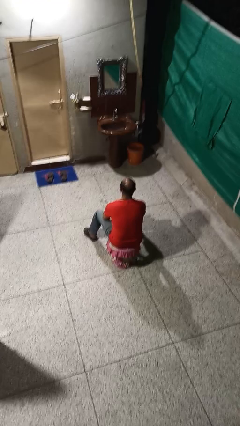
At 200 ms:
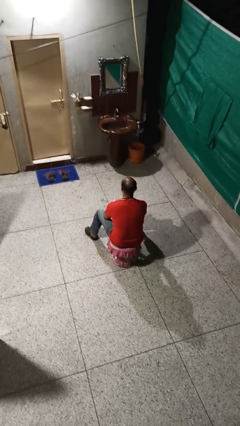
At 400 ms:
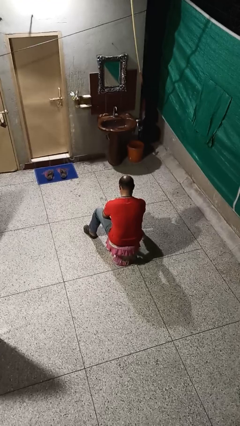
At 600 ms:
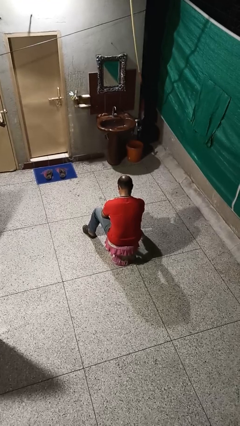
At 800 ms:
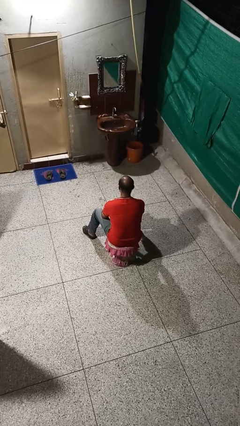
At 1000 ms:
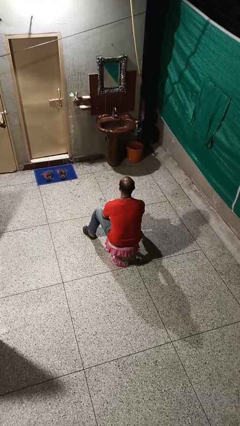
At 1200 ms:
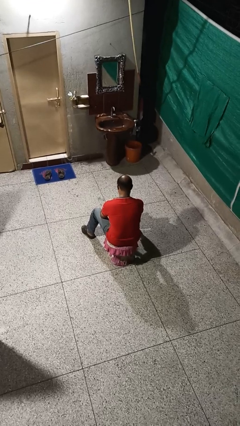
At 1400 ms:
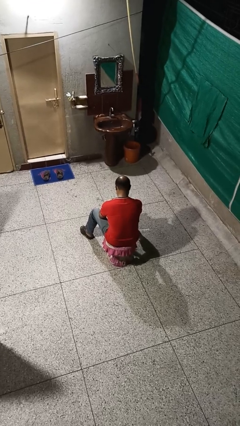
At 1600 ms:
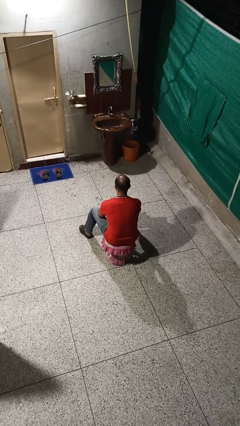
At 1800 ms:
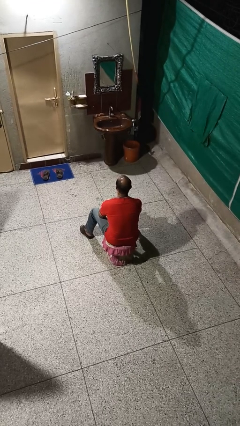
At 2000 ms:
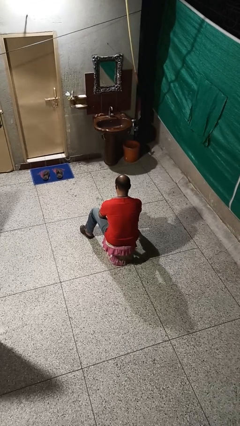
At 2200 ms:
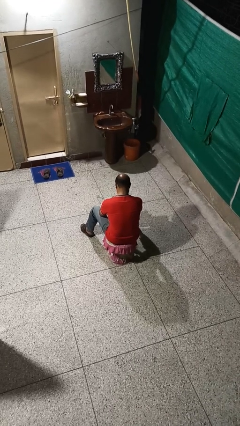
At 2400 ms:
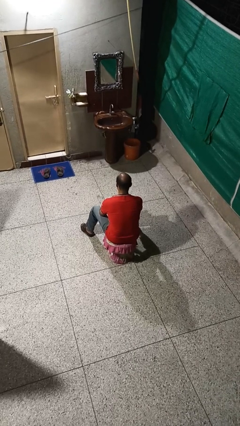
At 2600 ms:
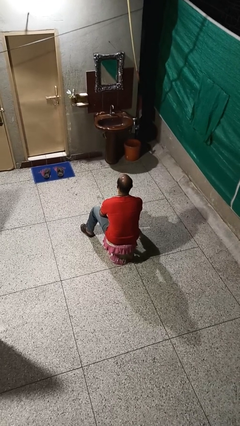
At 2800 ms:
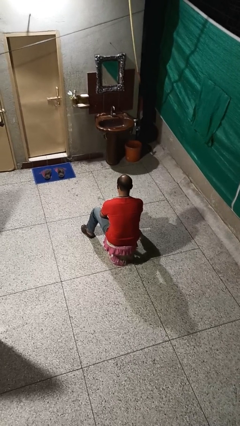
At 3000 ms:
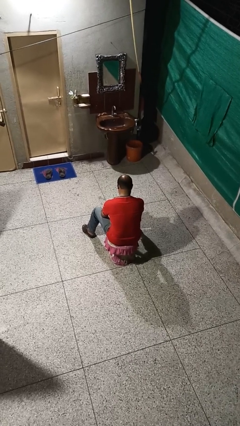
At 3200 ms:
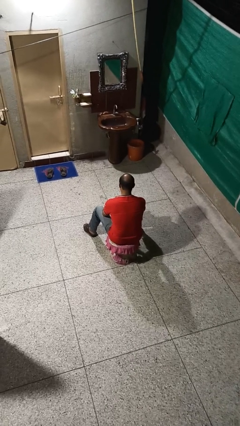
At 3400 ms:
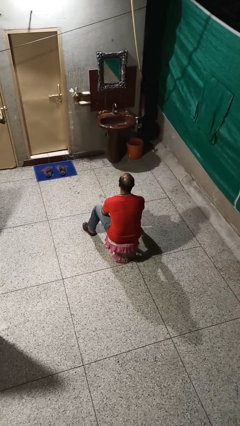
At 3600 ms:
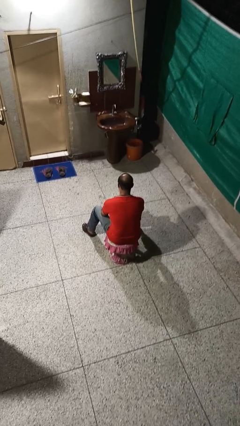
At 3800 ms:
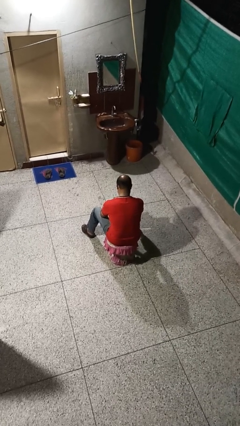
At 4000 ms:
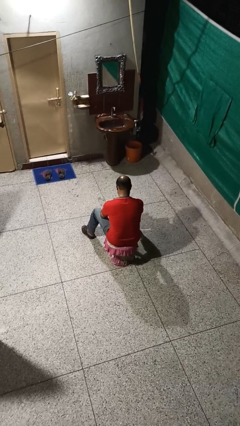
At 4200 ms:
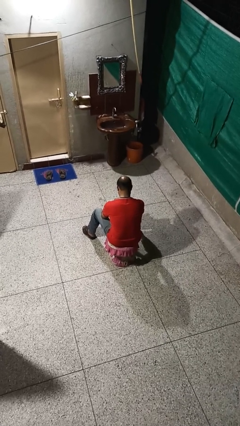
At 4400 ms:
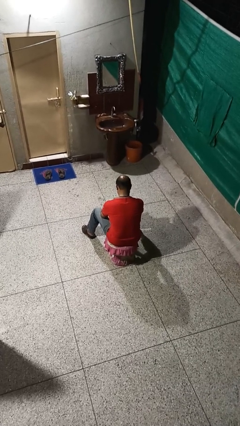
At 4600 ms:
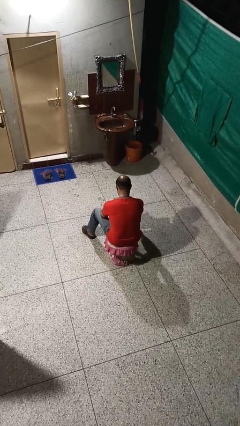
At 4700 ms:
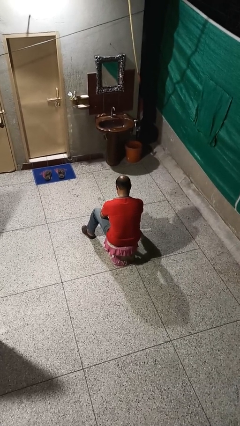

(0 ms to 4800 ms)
person nods head

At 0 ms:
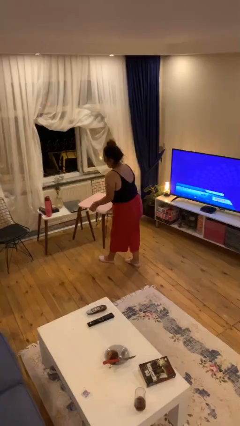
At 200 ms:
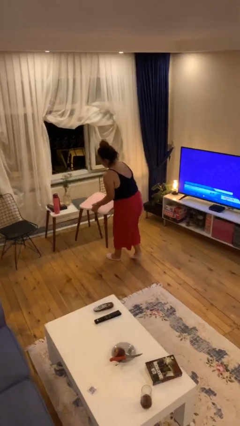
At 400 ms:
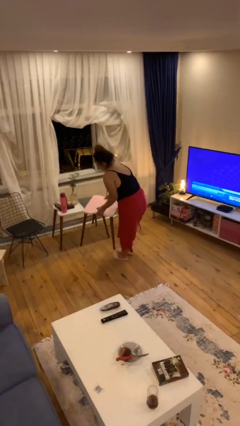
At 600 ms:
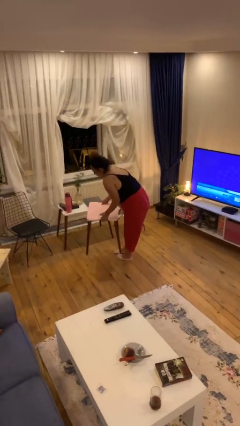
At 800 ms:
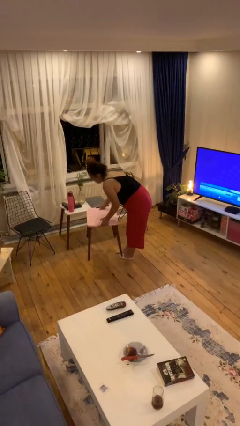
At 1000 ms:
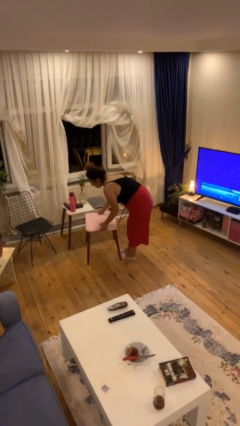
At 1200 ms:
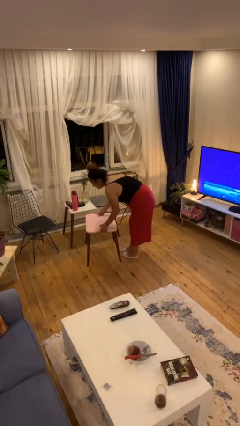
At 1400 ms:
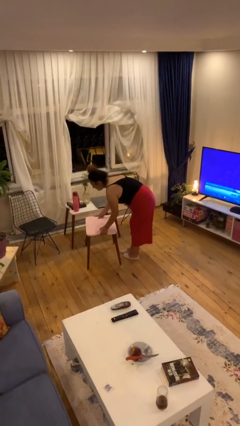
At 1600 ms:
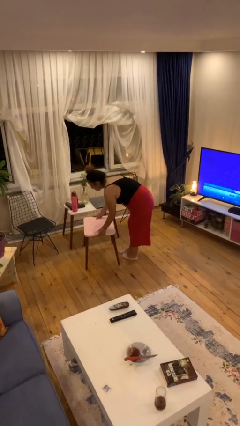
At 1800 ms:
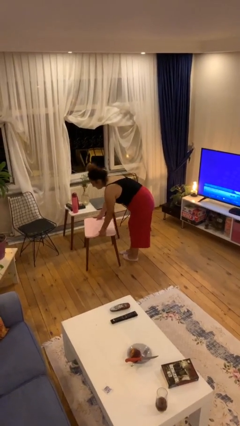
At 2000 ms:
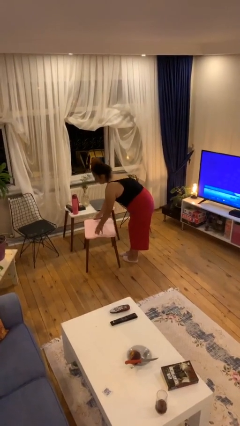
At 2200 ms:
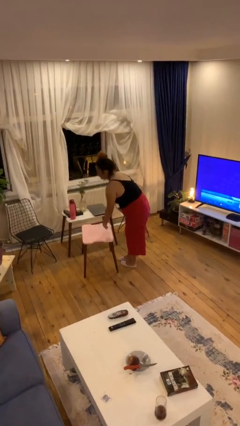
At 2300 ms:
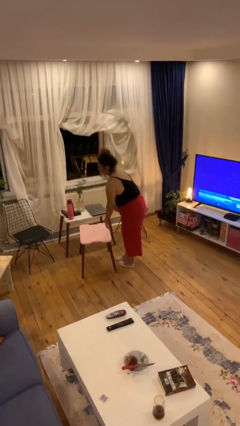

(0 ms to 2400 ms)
person puts down object on floor

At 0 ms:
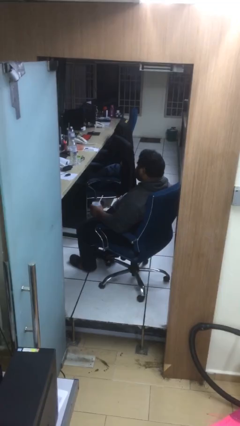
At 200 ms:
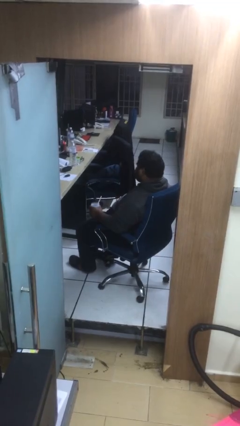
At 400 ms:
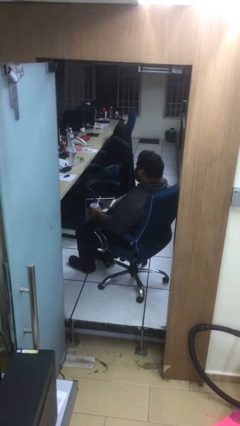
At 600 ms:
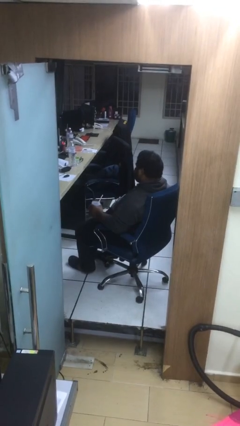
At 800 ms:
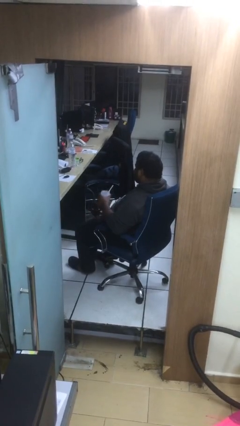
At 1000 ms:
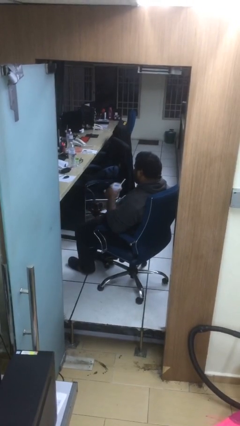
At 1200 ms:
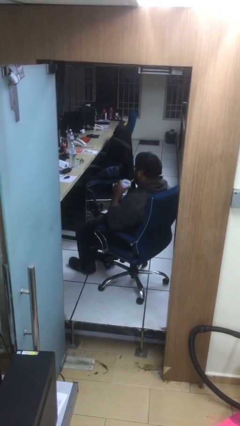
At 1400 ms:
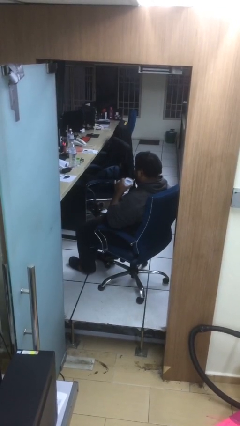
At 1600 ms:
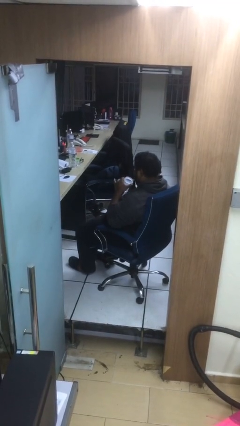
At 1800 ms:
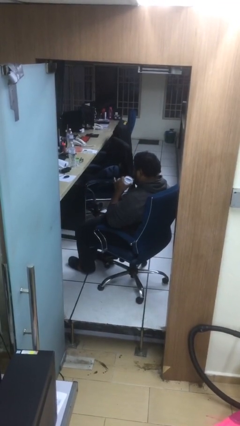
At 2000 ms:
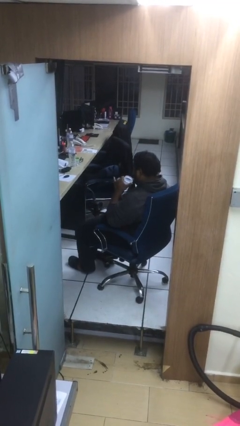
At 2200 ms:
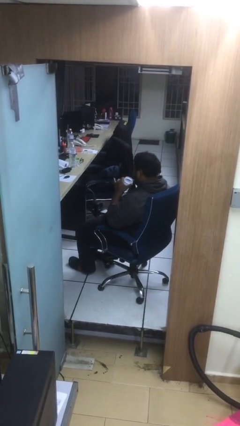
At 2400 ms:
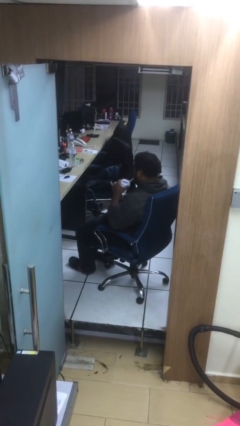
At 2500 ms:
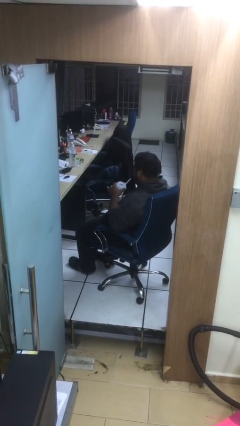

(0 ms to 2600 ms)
person drinks from straw

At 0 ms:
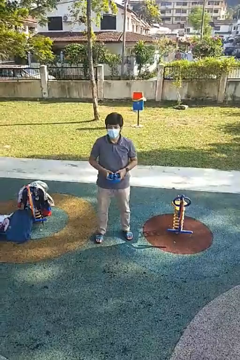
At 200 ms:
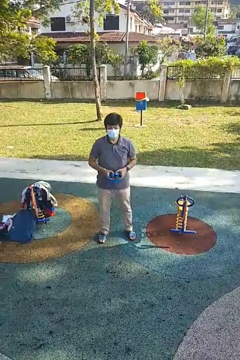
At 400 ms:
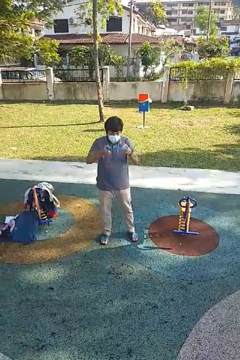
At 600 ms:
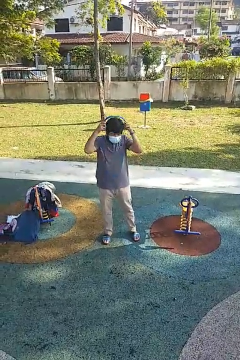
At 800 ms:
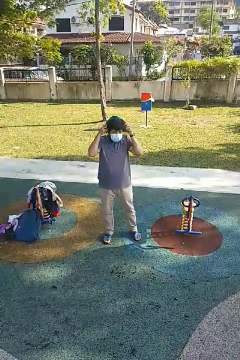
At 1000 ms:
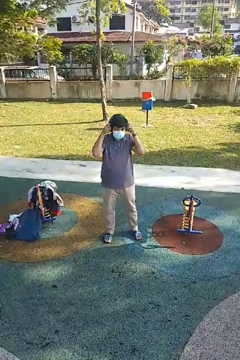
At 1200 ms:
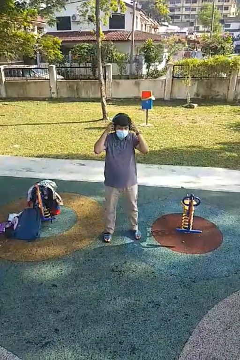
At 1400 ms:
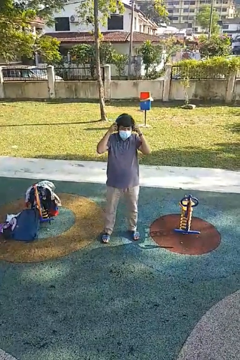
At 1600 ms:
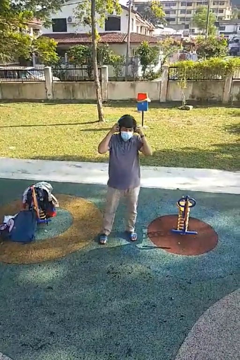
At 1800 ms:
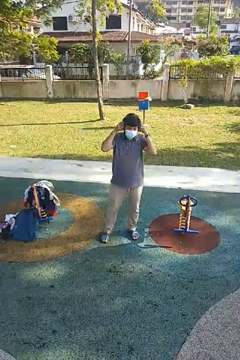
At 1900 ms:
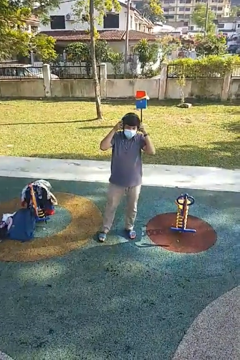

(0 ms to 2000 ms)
person puts on headphones

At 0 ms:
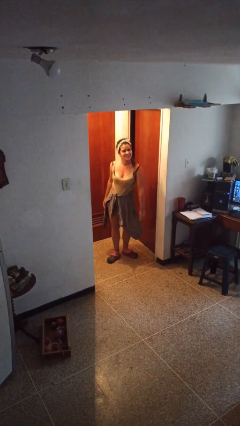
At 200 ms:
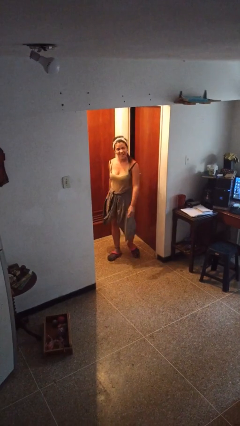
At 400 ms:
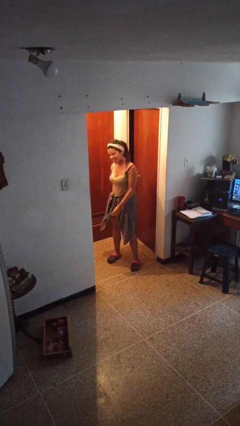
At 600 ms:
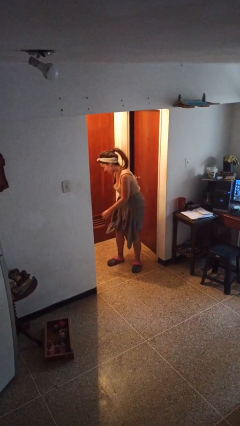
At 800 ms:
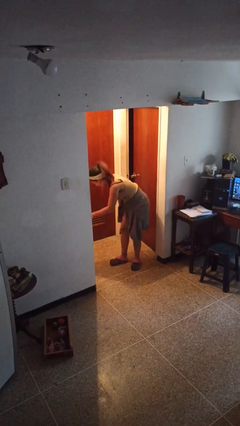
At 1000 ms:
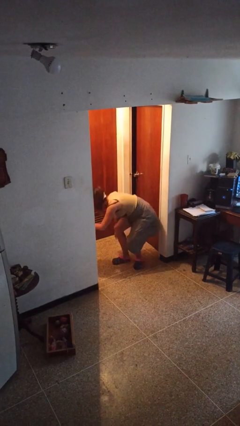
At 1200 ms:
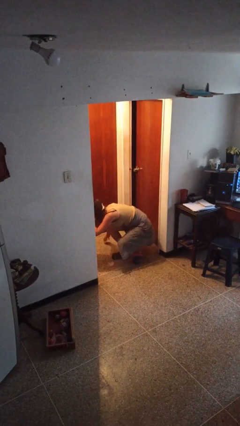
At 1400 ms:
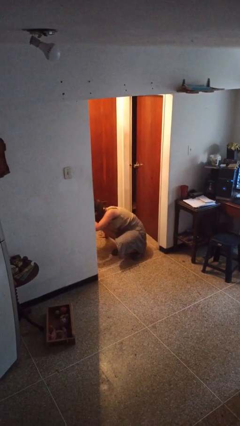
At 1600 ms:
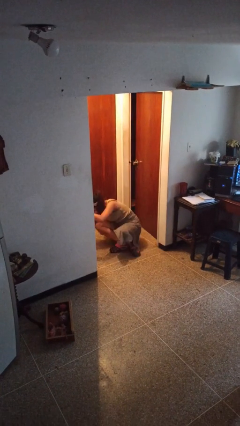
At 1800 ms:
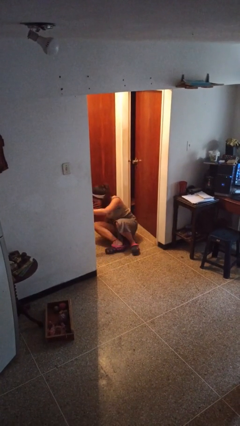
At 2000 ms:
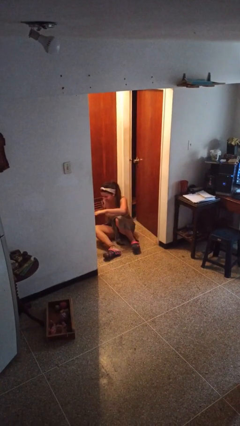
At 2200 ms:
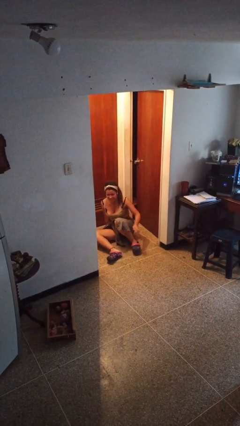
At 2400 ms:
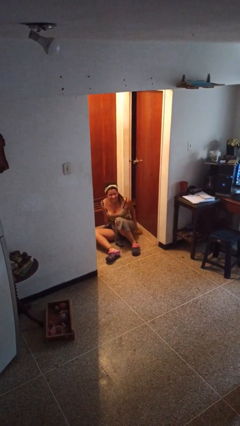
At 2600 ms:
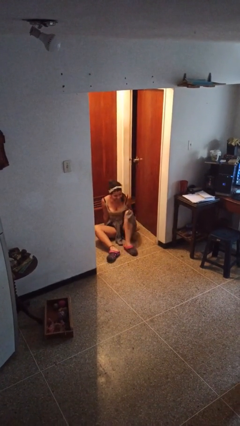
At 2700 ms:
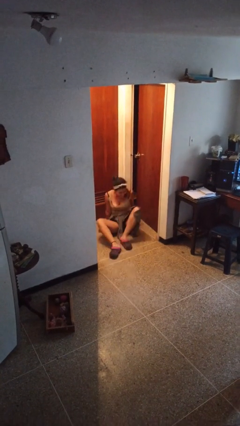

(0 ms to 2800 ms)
person sits down

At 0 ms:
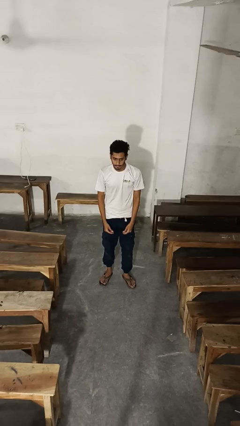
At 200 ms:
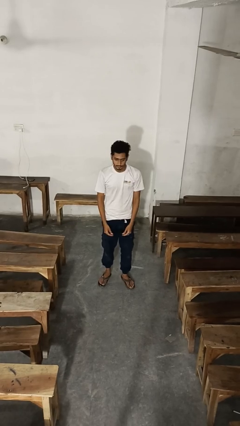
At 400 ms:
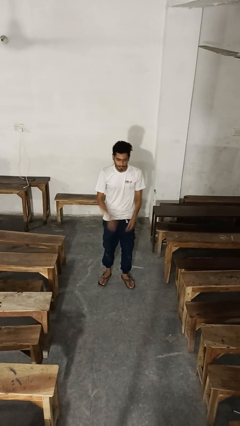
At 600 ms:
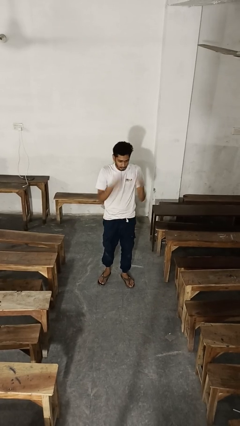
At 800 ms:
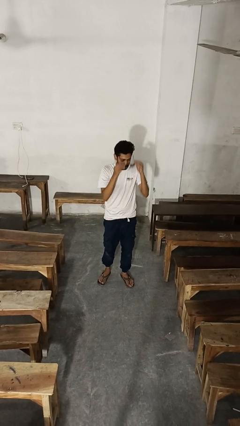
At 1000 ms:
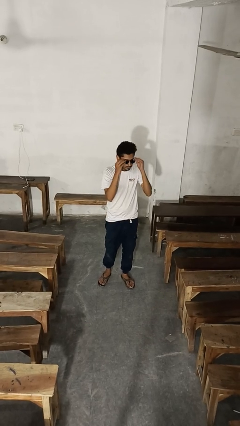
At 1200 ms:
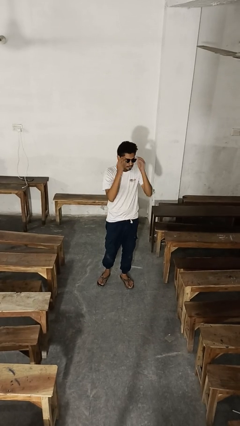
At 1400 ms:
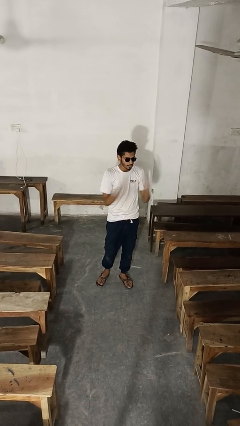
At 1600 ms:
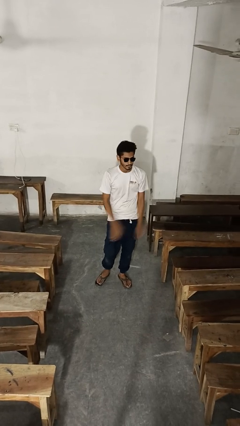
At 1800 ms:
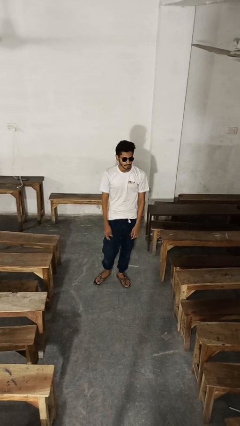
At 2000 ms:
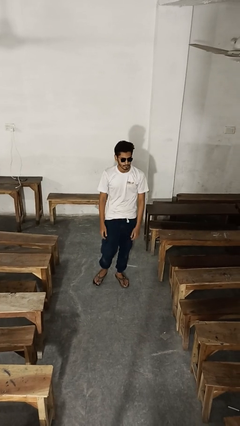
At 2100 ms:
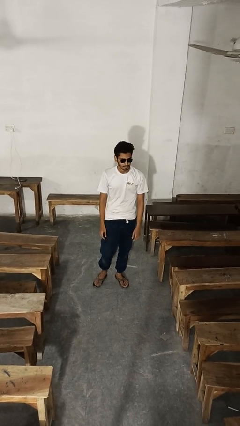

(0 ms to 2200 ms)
person puts on sunglasses

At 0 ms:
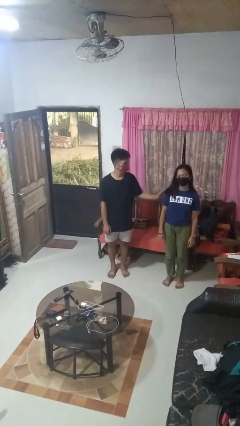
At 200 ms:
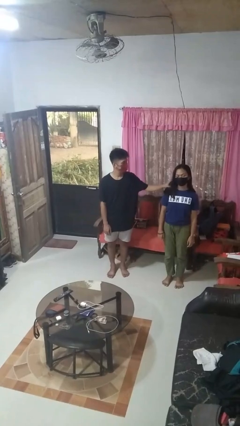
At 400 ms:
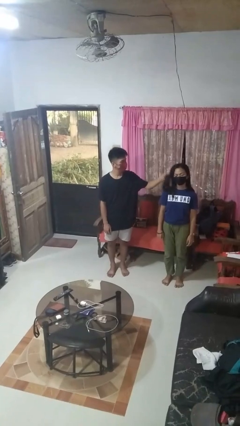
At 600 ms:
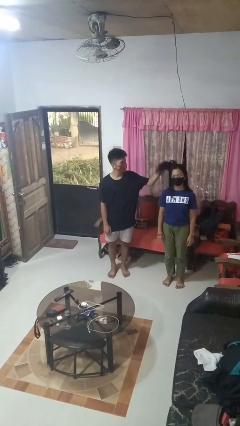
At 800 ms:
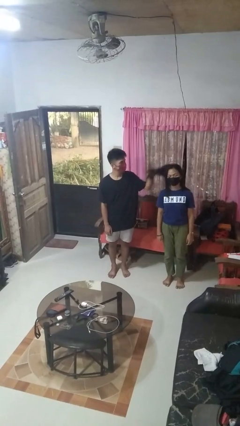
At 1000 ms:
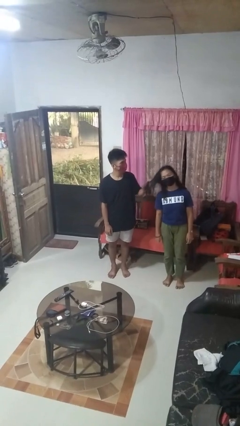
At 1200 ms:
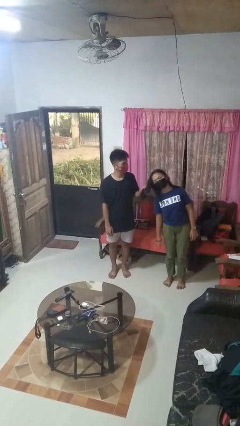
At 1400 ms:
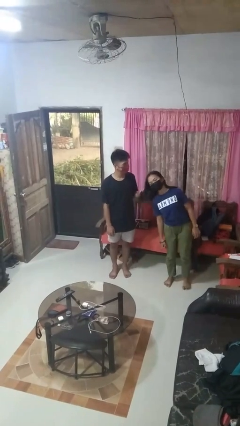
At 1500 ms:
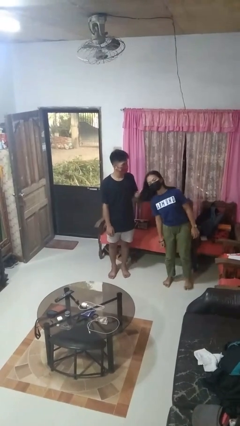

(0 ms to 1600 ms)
person grabs person by hair
